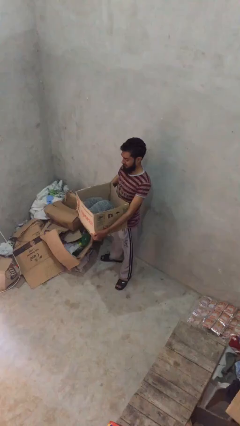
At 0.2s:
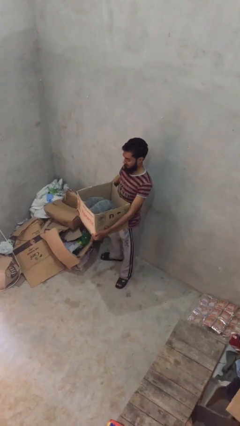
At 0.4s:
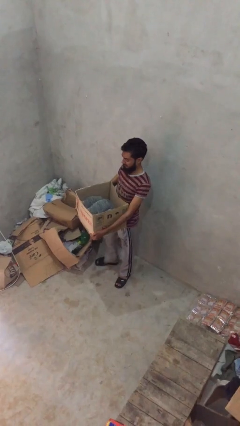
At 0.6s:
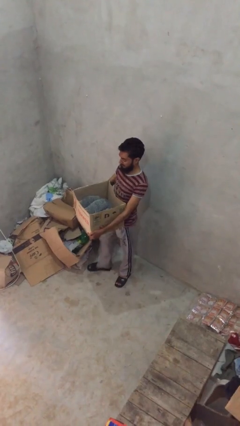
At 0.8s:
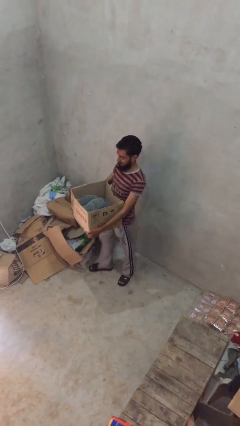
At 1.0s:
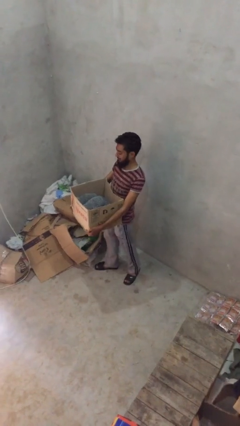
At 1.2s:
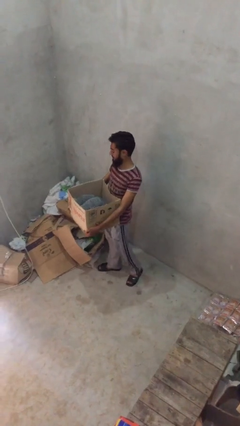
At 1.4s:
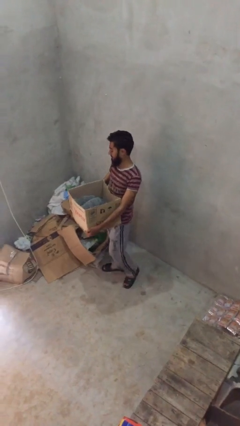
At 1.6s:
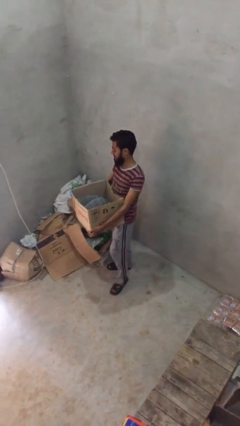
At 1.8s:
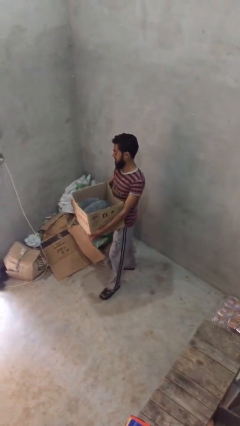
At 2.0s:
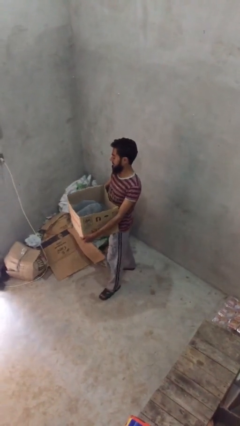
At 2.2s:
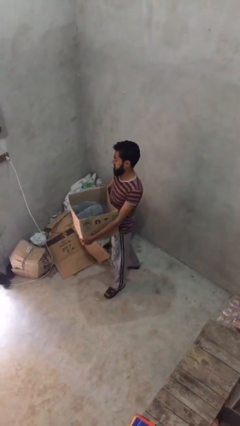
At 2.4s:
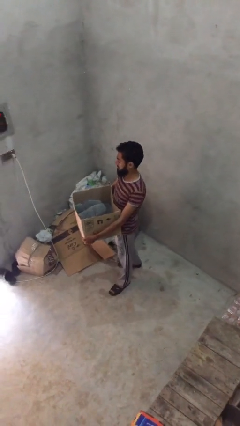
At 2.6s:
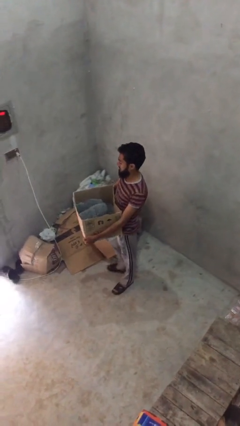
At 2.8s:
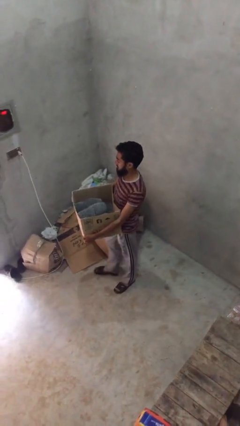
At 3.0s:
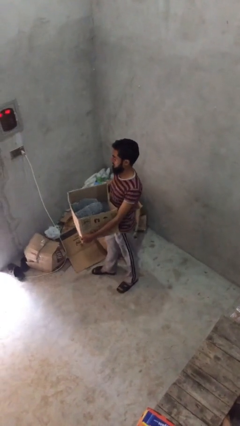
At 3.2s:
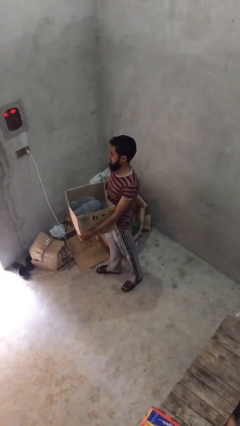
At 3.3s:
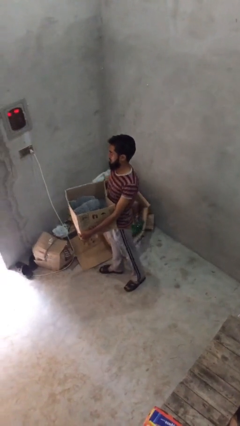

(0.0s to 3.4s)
person carries heavy object

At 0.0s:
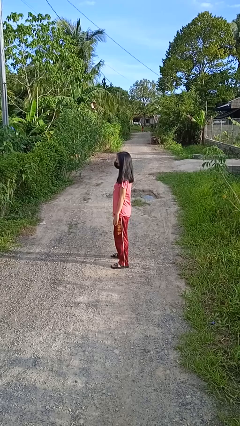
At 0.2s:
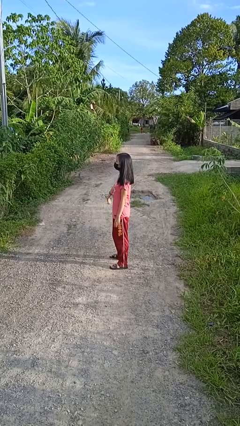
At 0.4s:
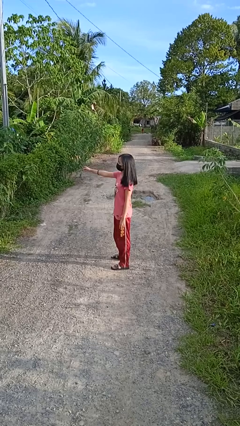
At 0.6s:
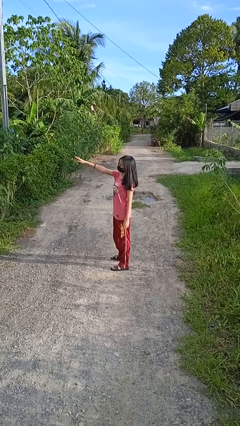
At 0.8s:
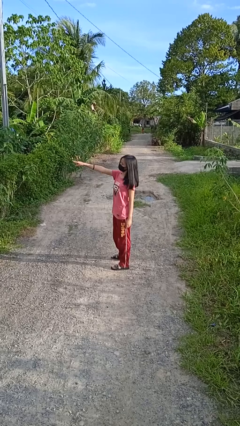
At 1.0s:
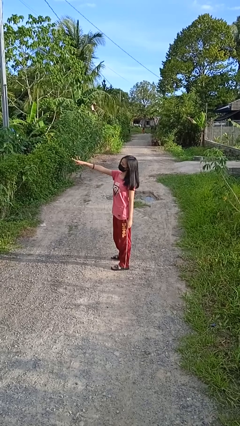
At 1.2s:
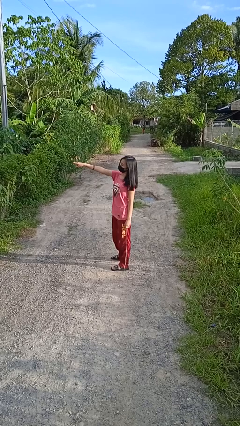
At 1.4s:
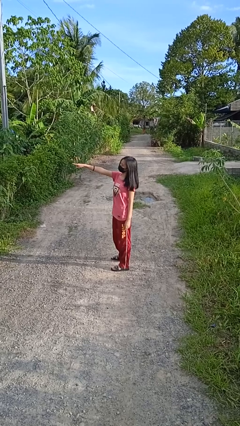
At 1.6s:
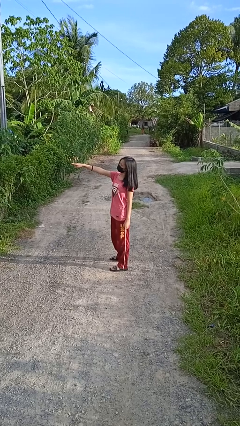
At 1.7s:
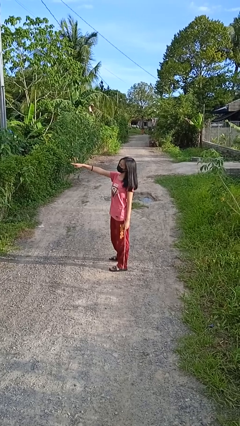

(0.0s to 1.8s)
person points at person

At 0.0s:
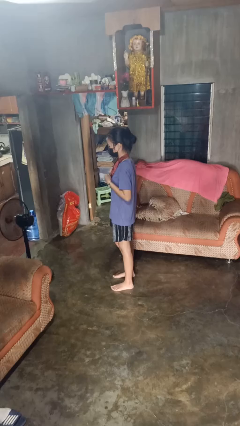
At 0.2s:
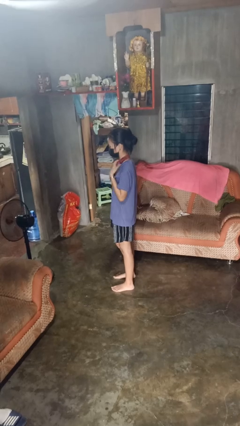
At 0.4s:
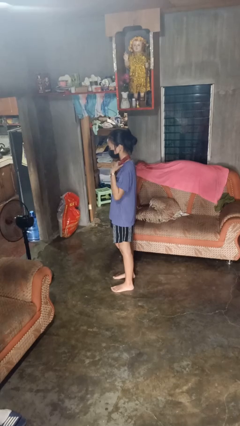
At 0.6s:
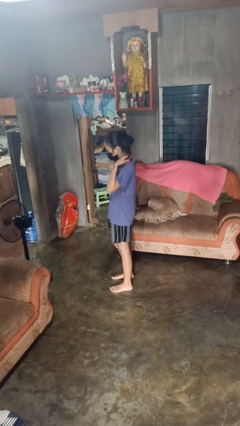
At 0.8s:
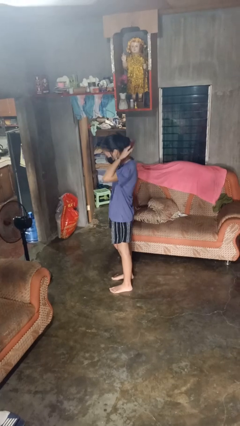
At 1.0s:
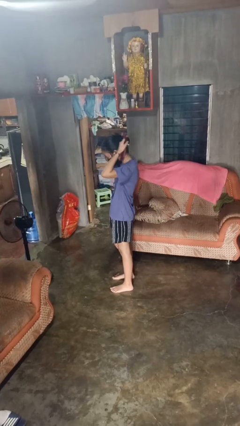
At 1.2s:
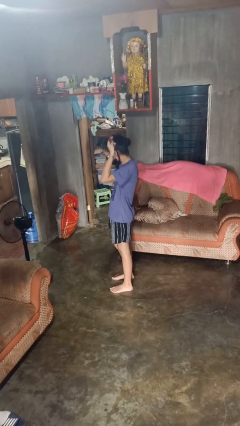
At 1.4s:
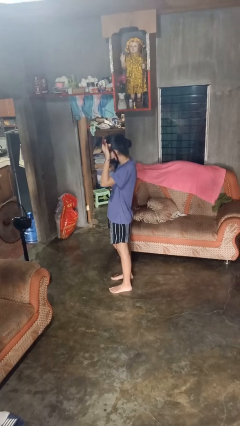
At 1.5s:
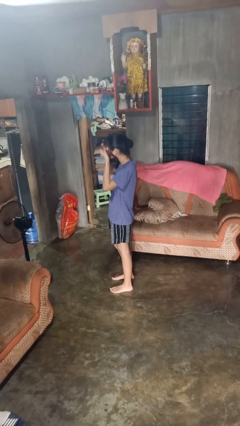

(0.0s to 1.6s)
person takes off necklace

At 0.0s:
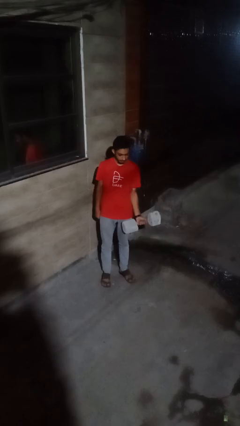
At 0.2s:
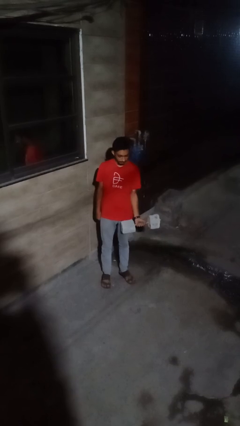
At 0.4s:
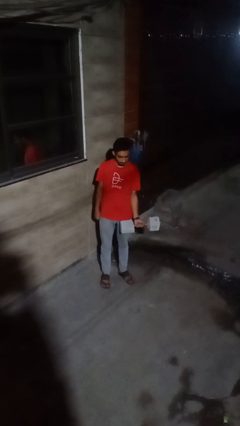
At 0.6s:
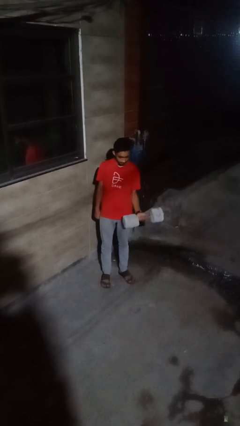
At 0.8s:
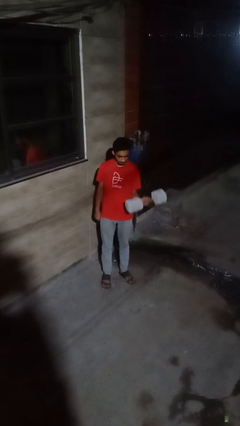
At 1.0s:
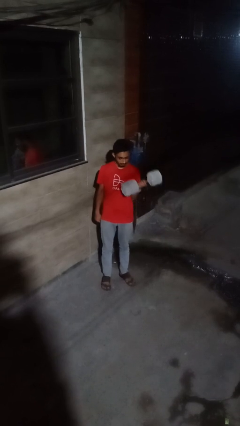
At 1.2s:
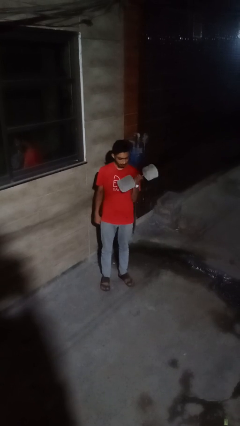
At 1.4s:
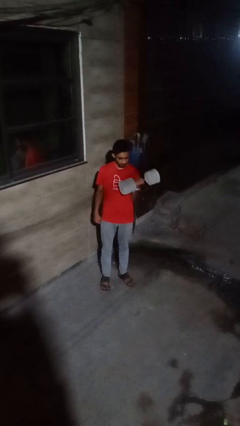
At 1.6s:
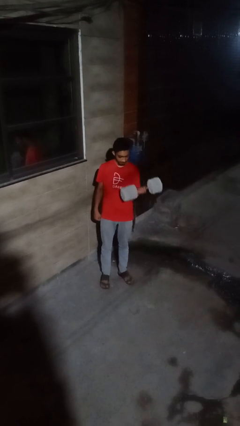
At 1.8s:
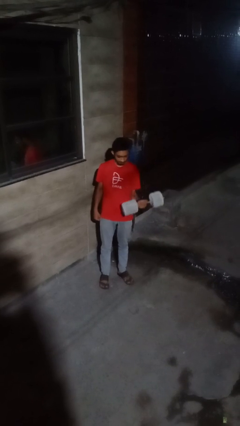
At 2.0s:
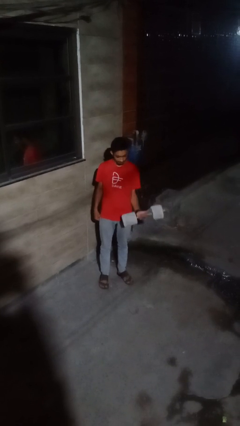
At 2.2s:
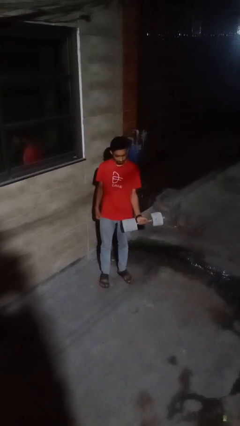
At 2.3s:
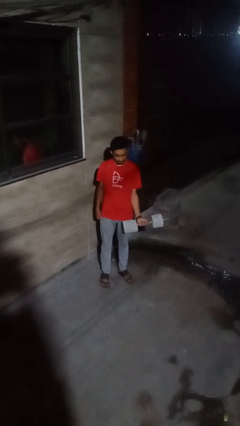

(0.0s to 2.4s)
person lifts dumbbells

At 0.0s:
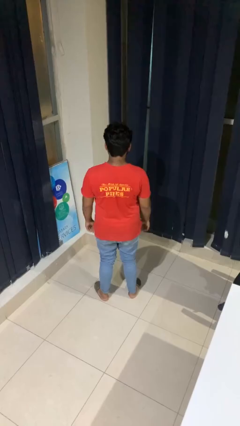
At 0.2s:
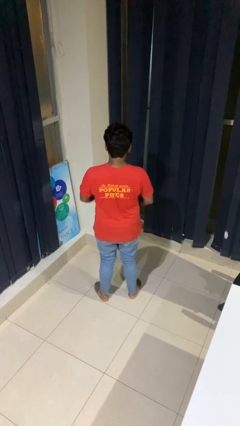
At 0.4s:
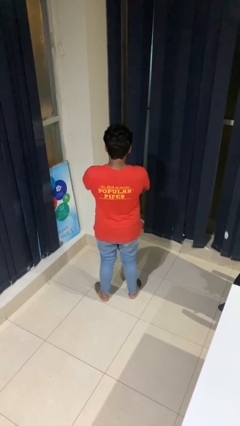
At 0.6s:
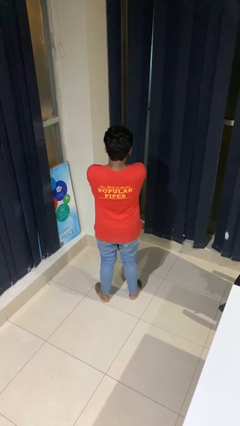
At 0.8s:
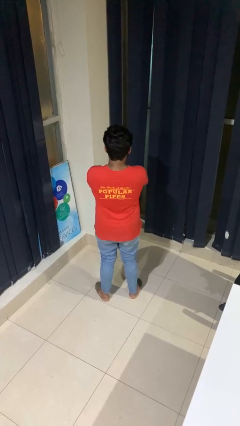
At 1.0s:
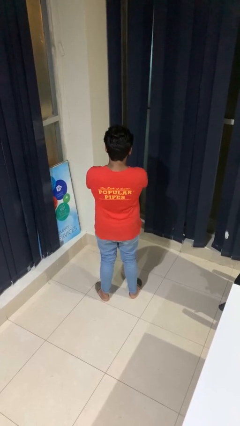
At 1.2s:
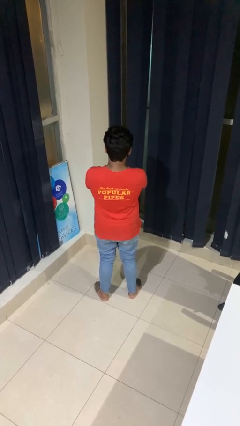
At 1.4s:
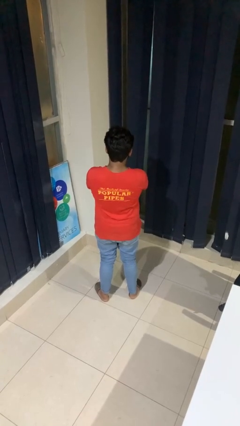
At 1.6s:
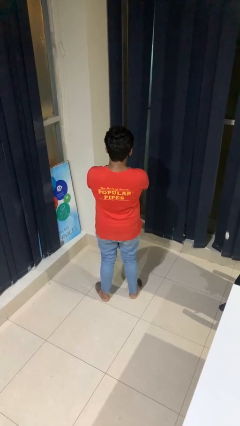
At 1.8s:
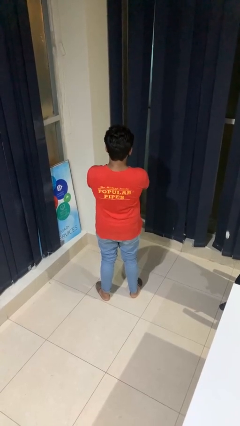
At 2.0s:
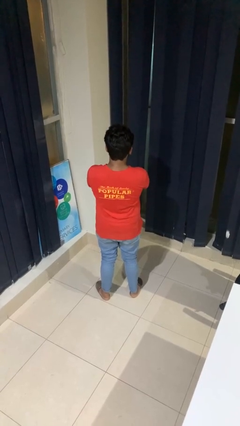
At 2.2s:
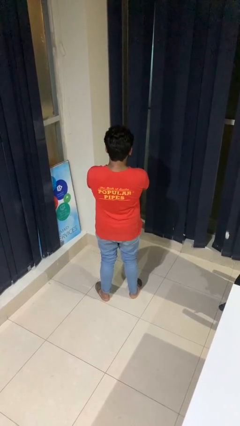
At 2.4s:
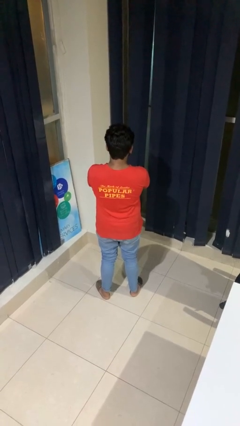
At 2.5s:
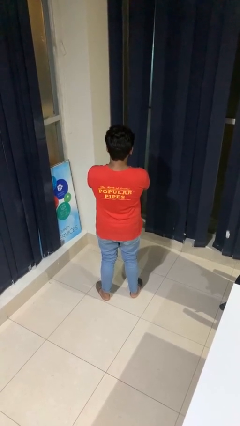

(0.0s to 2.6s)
person crosses arms

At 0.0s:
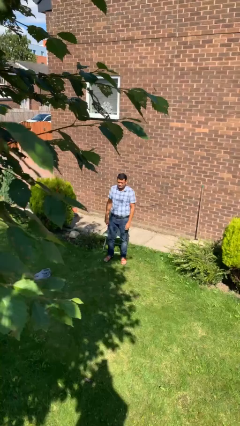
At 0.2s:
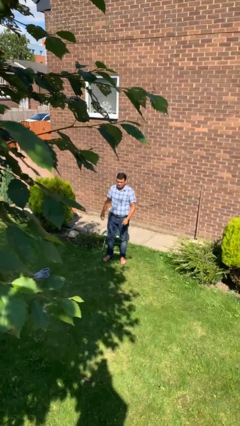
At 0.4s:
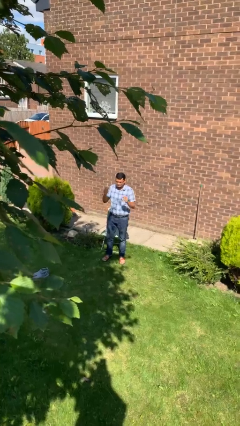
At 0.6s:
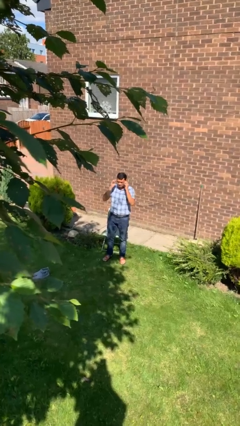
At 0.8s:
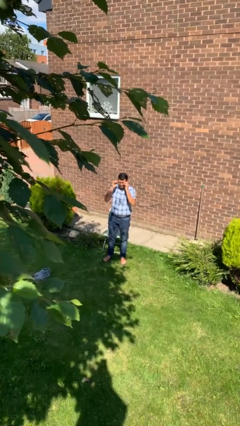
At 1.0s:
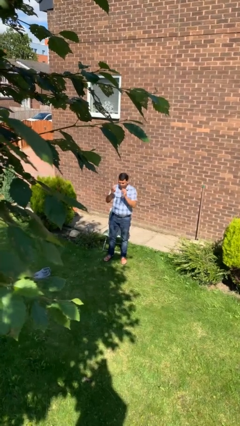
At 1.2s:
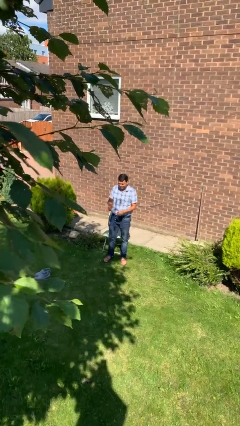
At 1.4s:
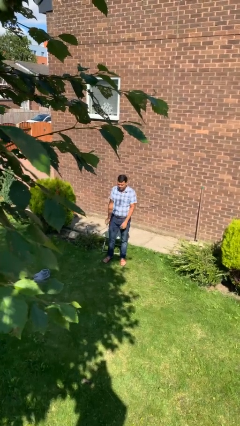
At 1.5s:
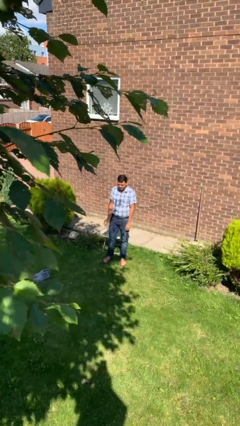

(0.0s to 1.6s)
person takes off glasses

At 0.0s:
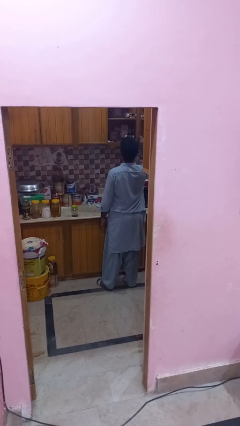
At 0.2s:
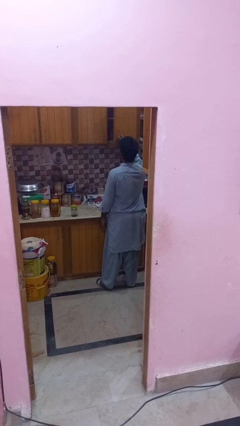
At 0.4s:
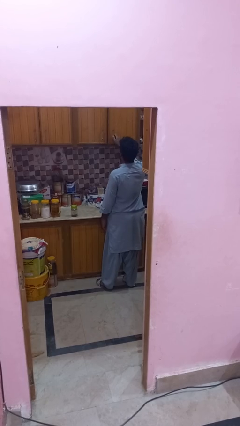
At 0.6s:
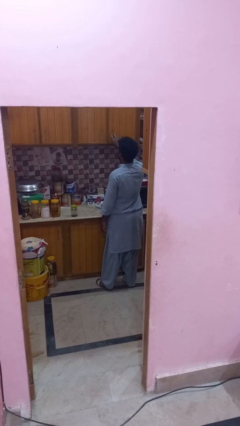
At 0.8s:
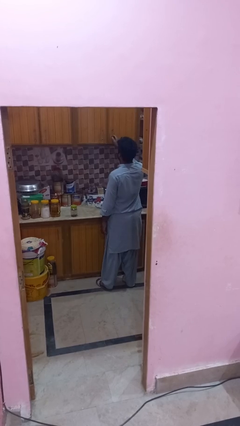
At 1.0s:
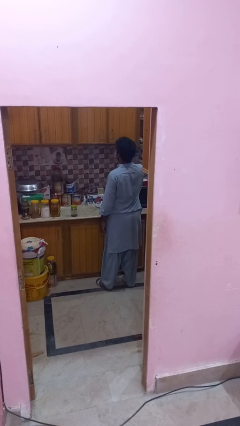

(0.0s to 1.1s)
person closes cabinet

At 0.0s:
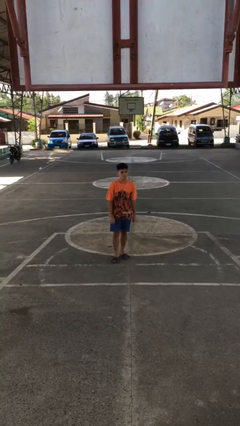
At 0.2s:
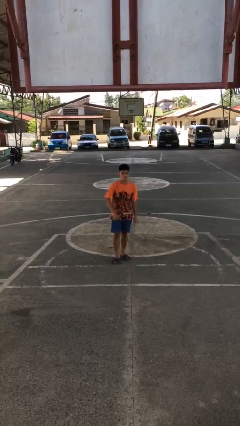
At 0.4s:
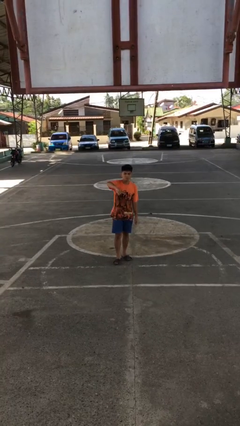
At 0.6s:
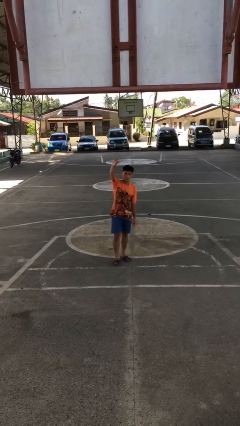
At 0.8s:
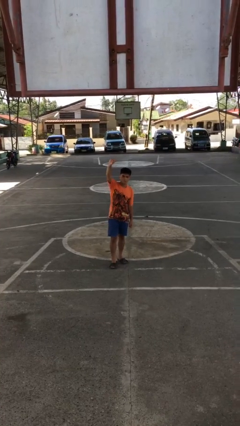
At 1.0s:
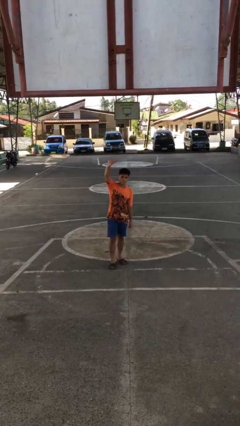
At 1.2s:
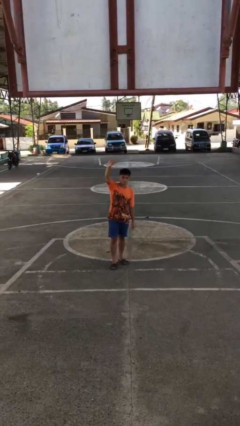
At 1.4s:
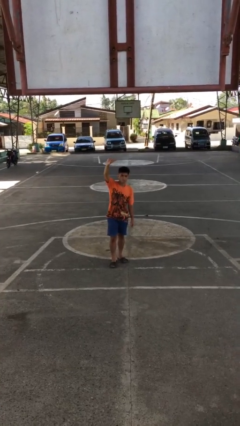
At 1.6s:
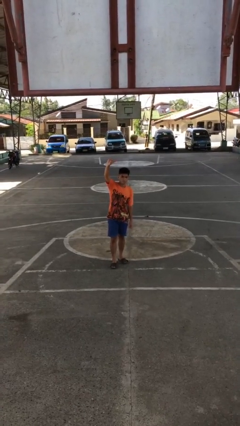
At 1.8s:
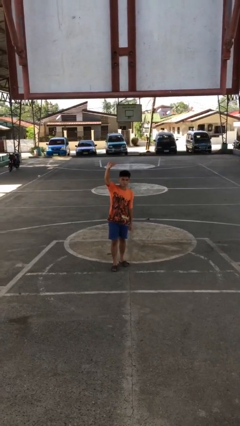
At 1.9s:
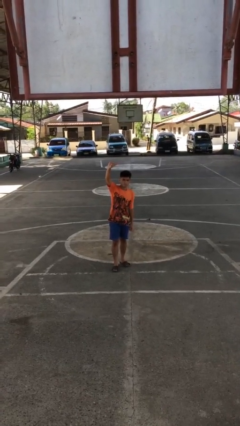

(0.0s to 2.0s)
person gestures swipe up

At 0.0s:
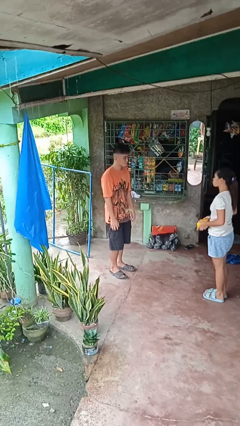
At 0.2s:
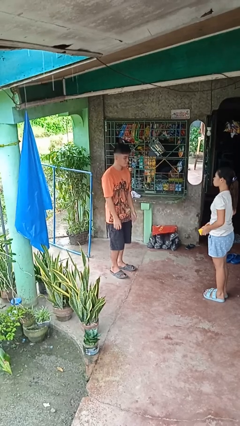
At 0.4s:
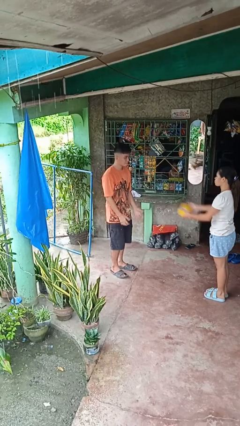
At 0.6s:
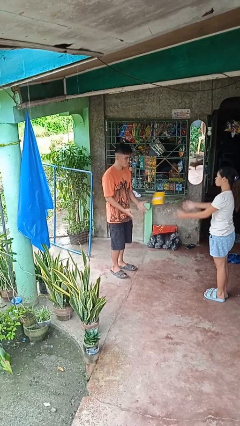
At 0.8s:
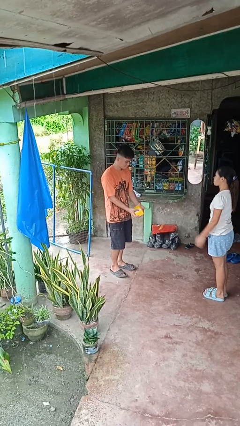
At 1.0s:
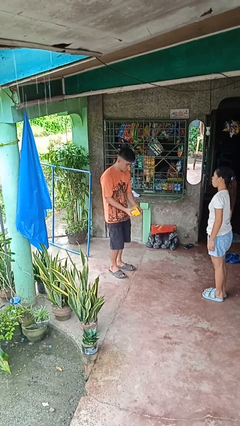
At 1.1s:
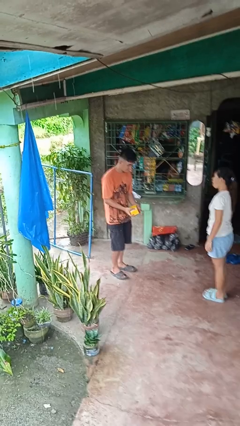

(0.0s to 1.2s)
person catches object from person
